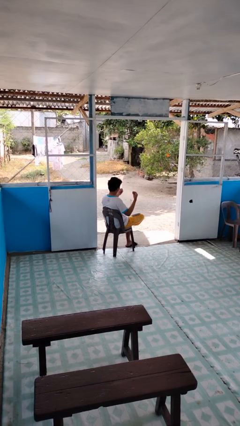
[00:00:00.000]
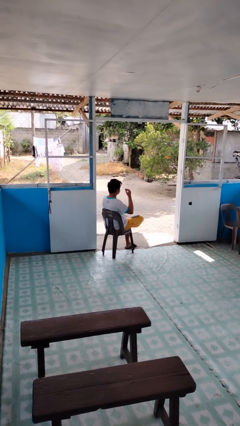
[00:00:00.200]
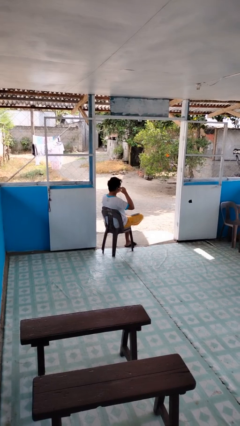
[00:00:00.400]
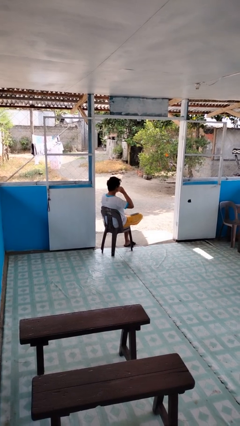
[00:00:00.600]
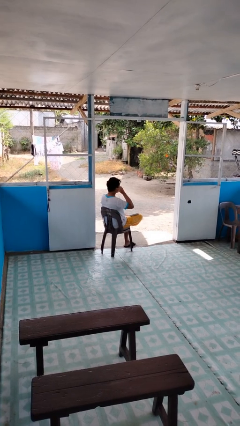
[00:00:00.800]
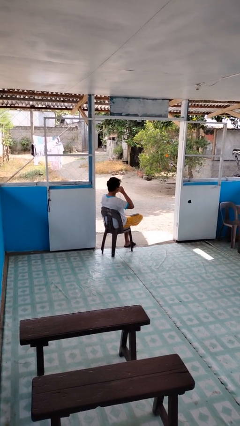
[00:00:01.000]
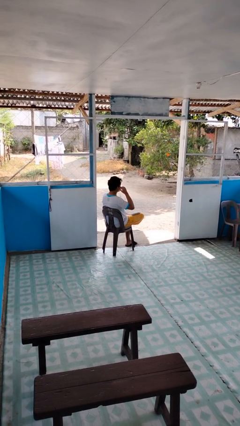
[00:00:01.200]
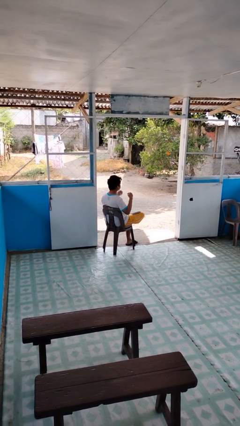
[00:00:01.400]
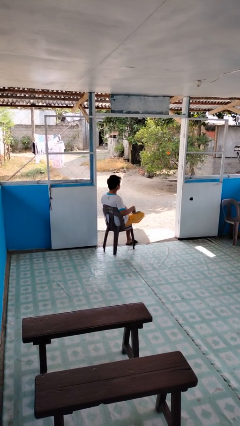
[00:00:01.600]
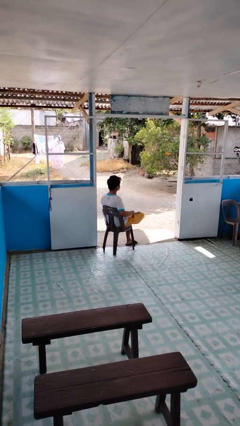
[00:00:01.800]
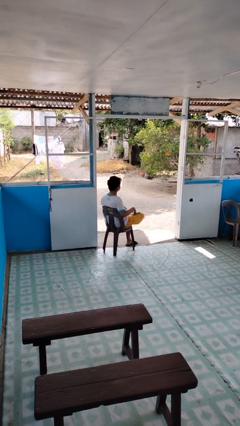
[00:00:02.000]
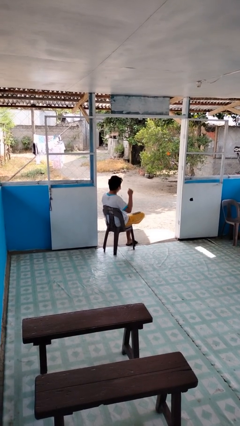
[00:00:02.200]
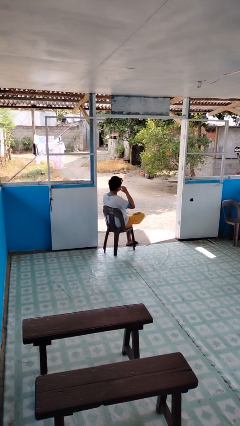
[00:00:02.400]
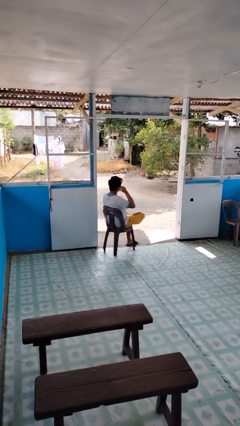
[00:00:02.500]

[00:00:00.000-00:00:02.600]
person puts on headphones

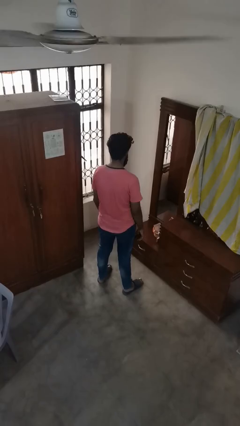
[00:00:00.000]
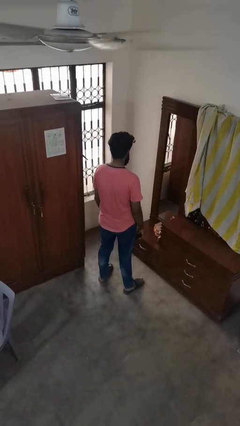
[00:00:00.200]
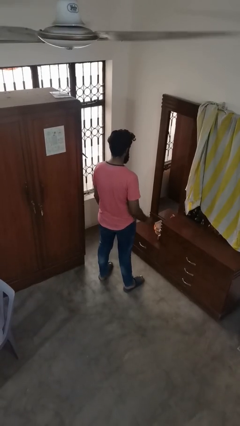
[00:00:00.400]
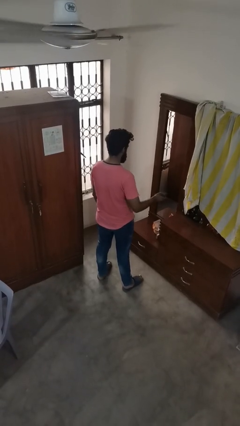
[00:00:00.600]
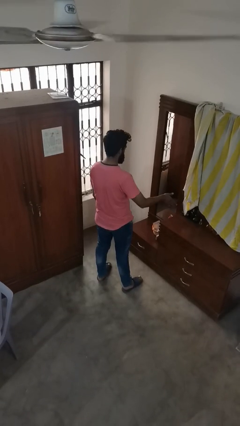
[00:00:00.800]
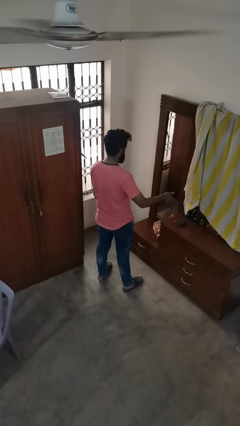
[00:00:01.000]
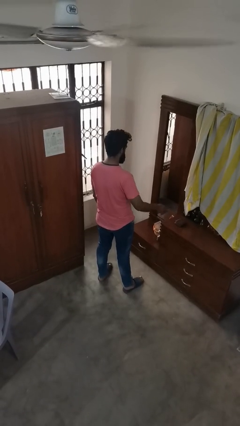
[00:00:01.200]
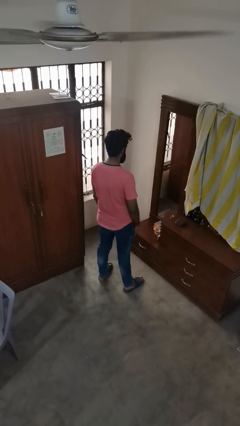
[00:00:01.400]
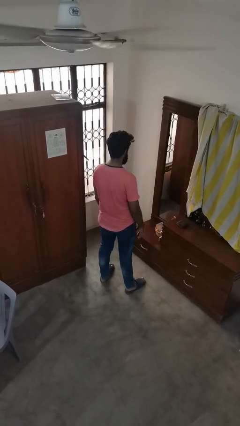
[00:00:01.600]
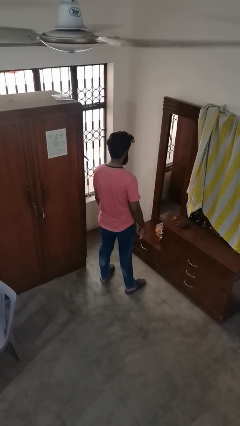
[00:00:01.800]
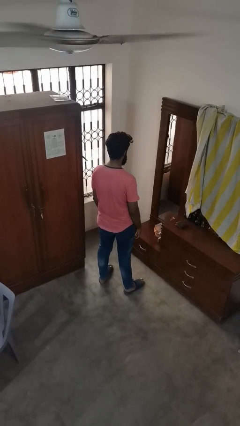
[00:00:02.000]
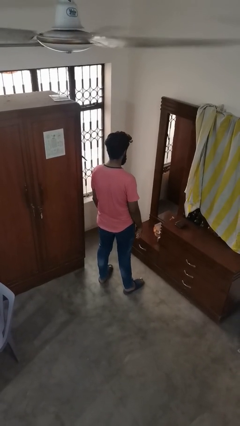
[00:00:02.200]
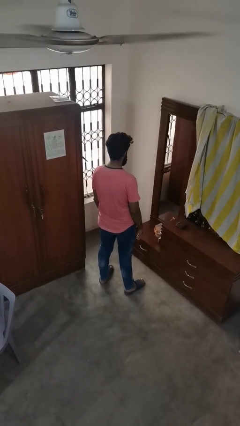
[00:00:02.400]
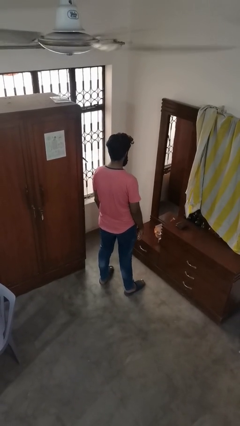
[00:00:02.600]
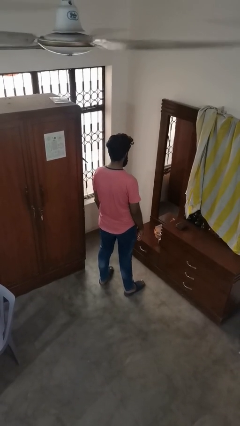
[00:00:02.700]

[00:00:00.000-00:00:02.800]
person throws object to ground

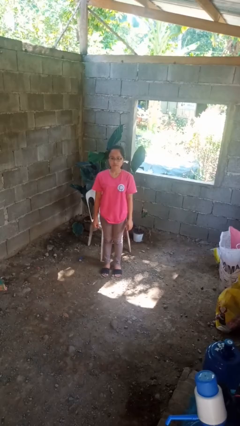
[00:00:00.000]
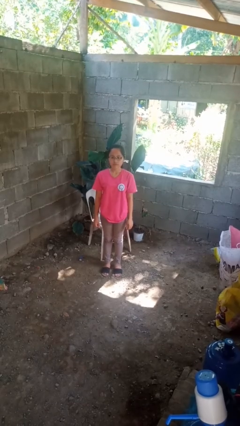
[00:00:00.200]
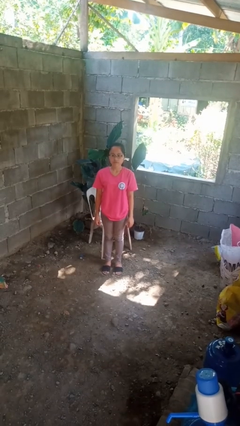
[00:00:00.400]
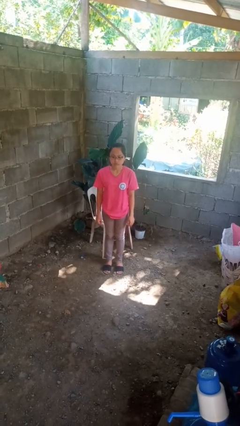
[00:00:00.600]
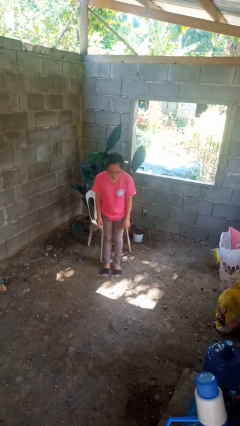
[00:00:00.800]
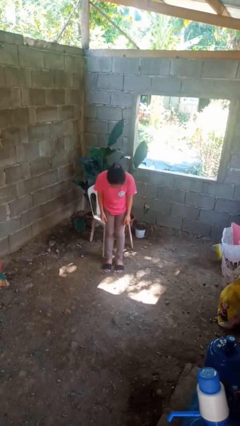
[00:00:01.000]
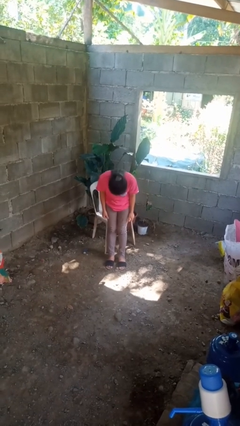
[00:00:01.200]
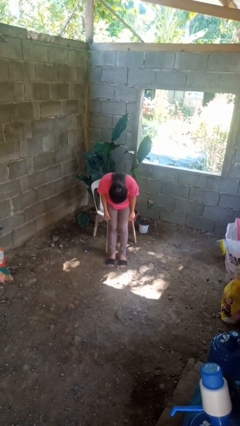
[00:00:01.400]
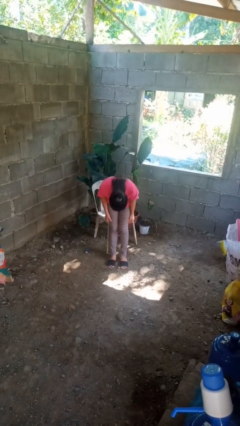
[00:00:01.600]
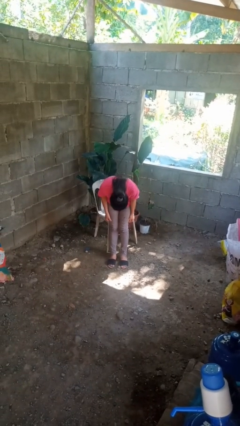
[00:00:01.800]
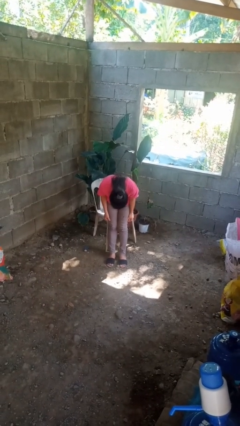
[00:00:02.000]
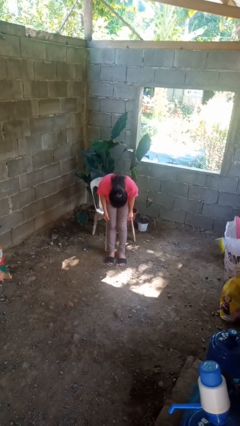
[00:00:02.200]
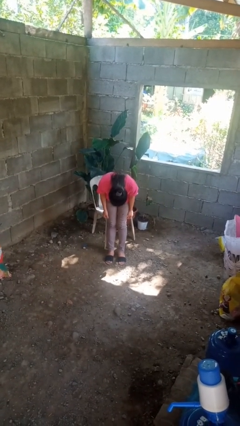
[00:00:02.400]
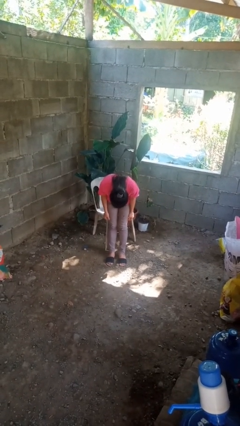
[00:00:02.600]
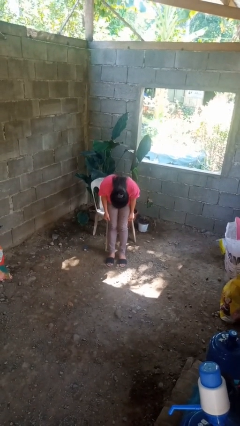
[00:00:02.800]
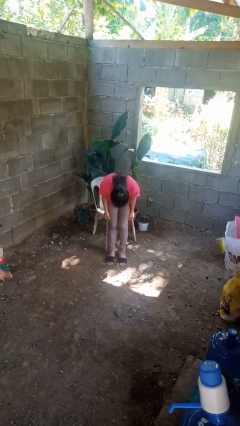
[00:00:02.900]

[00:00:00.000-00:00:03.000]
person bows

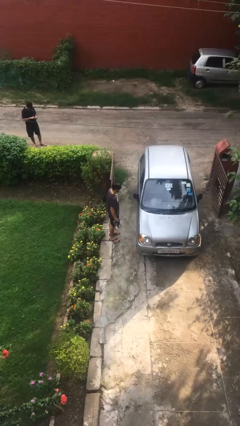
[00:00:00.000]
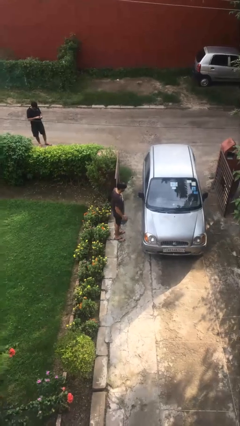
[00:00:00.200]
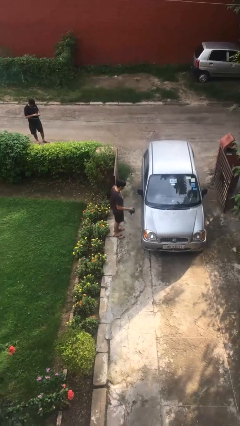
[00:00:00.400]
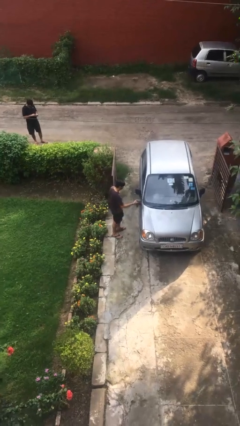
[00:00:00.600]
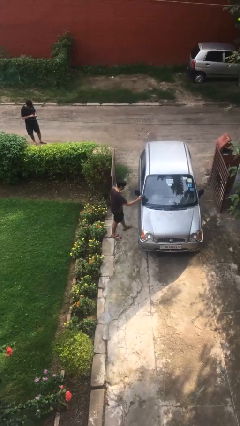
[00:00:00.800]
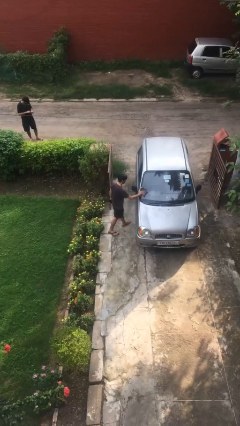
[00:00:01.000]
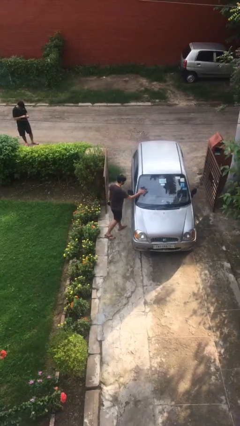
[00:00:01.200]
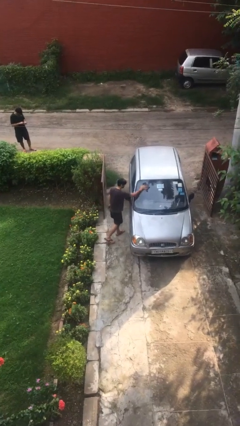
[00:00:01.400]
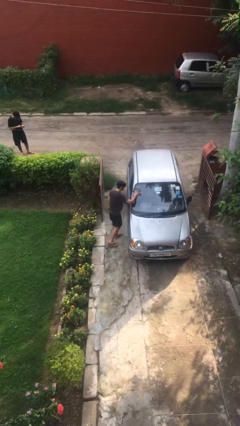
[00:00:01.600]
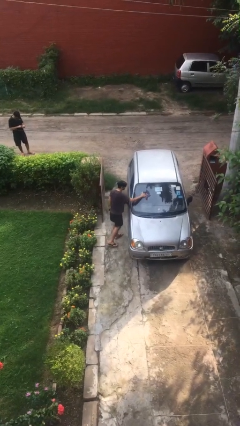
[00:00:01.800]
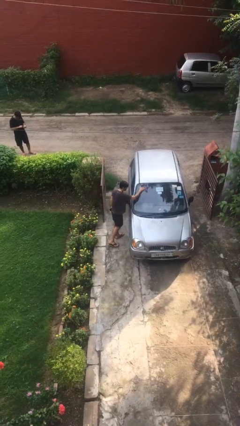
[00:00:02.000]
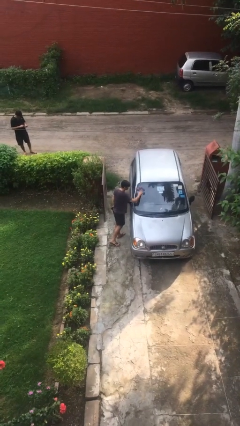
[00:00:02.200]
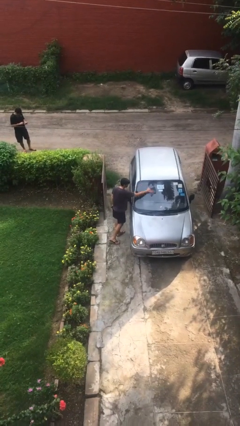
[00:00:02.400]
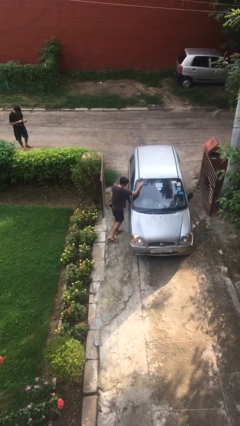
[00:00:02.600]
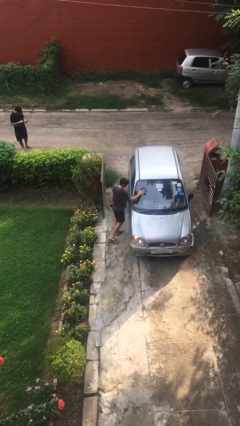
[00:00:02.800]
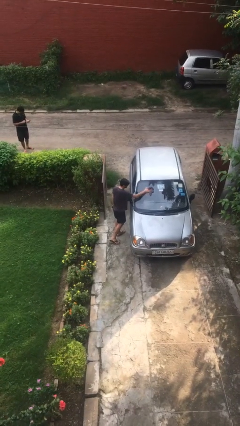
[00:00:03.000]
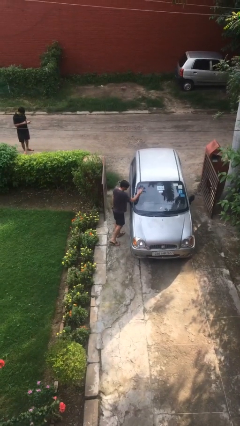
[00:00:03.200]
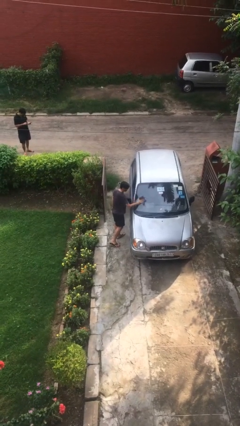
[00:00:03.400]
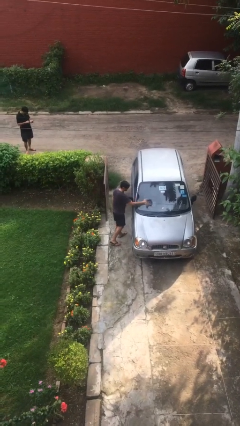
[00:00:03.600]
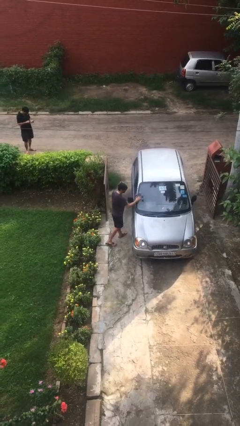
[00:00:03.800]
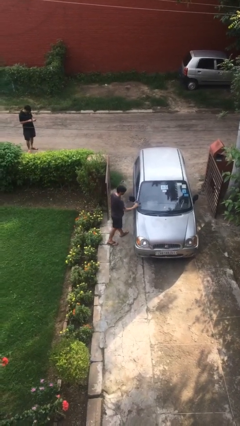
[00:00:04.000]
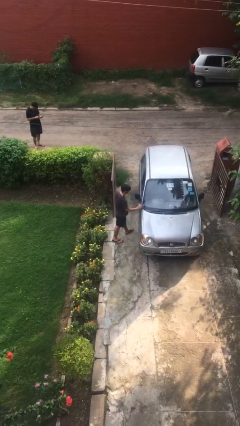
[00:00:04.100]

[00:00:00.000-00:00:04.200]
person polishes car with rag

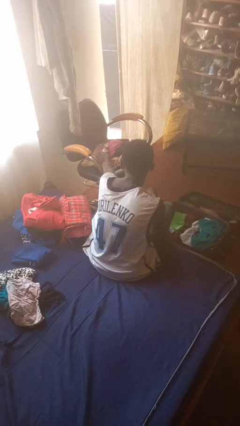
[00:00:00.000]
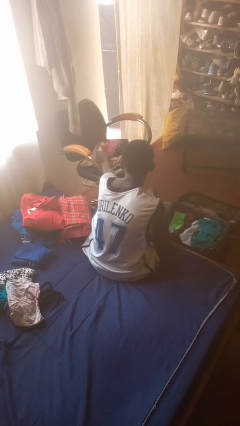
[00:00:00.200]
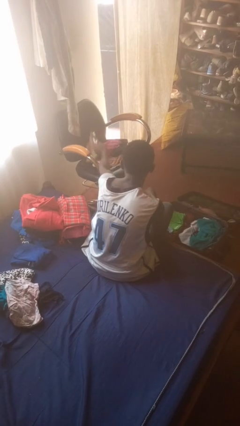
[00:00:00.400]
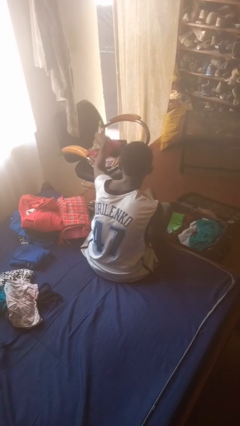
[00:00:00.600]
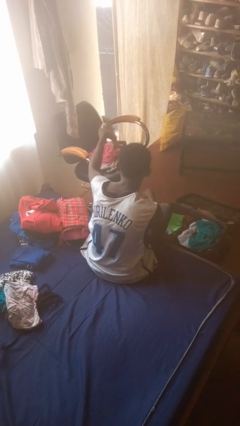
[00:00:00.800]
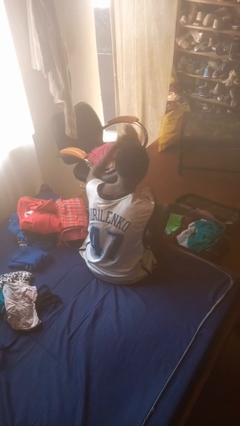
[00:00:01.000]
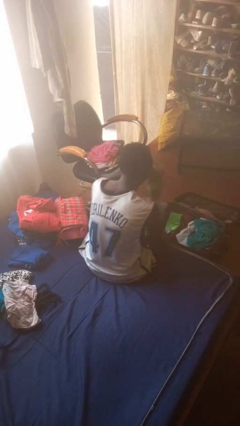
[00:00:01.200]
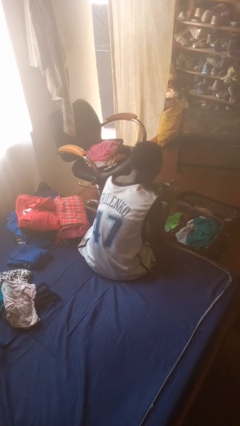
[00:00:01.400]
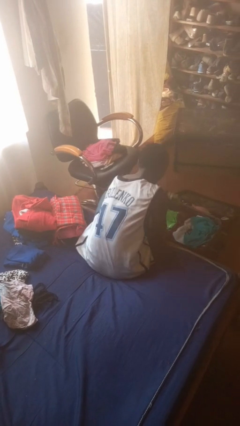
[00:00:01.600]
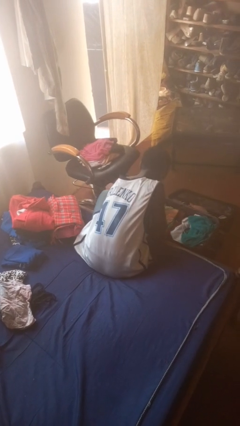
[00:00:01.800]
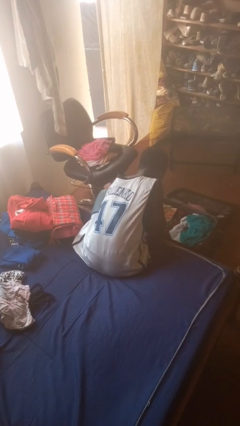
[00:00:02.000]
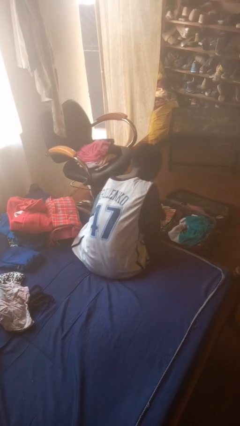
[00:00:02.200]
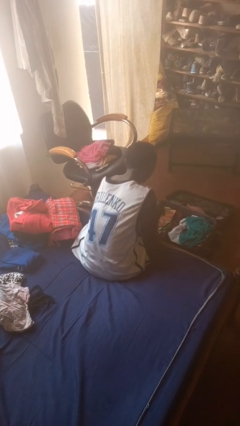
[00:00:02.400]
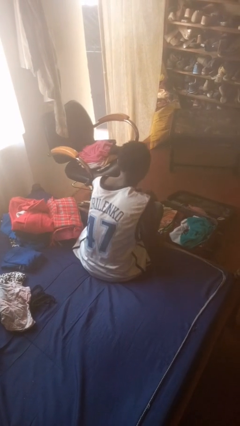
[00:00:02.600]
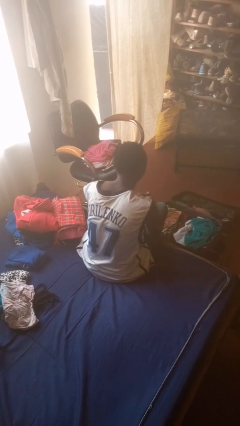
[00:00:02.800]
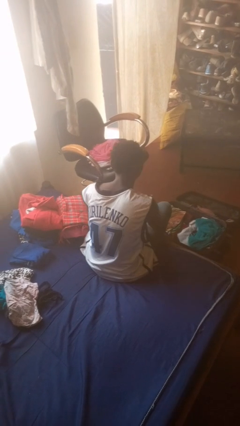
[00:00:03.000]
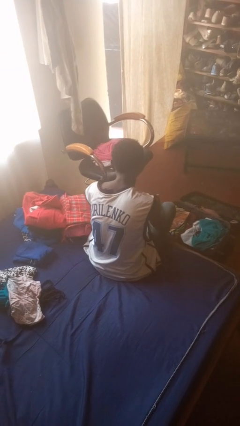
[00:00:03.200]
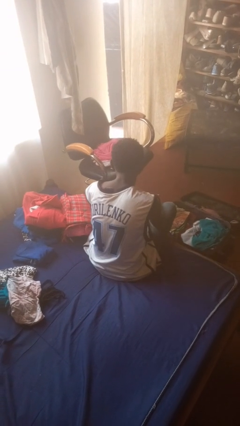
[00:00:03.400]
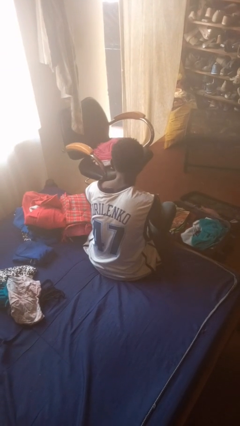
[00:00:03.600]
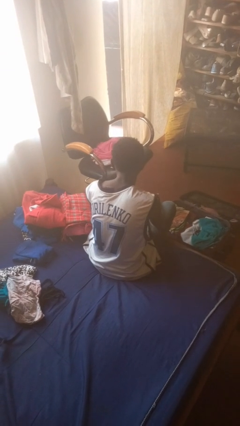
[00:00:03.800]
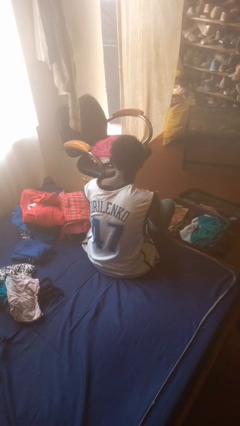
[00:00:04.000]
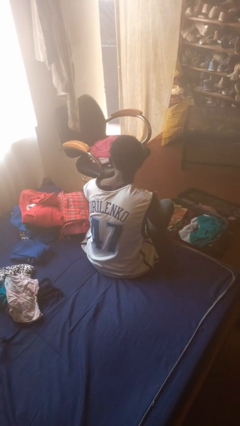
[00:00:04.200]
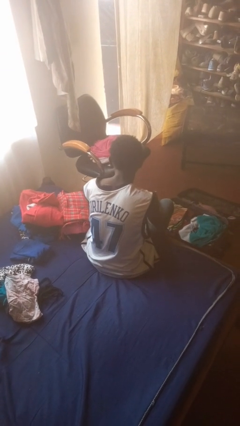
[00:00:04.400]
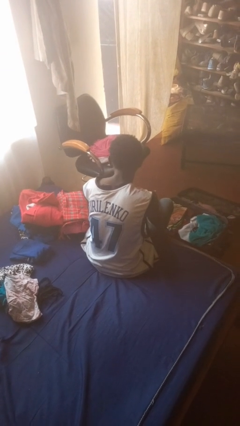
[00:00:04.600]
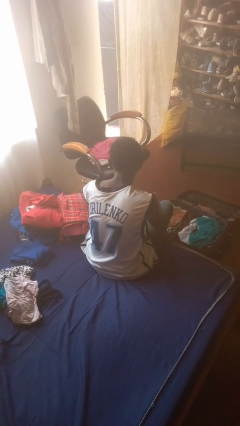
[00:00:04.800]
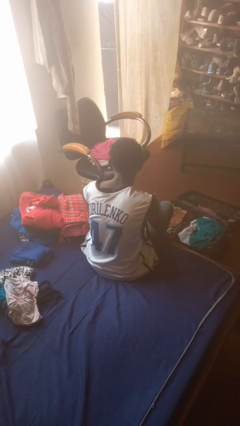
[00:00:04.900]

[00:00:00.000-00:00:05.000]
person loads clothes into suitcase
